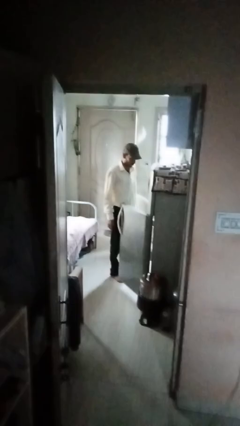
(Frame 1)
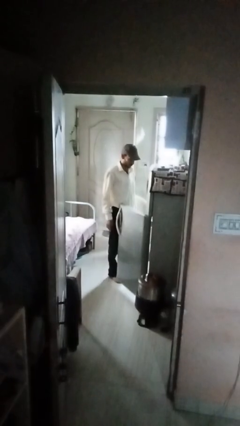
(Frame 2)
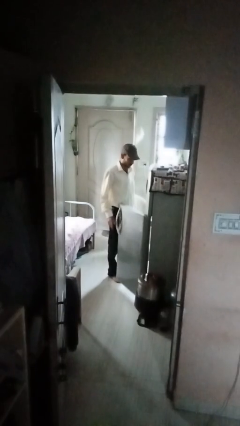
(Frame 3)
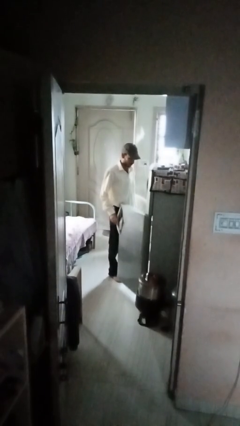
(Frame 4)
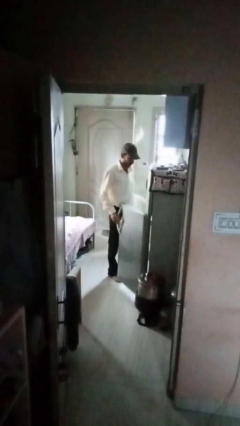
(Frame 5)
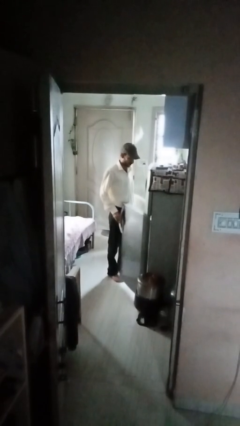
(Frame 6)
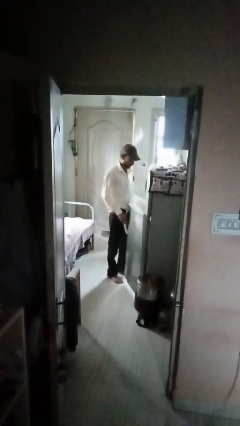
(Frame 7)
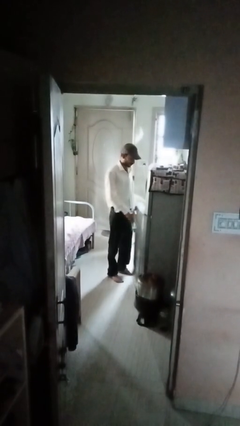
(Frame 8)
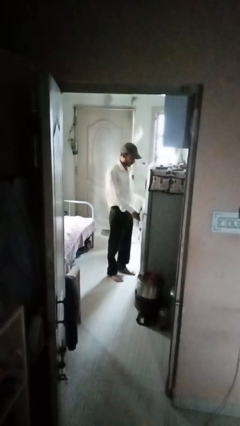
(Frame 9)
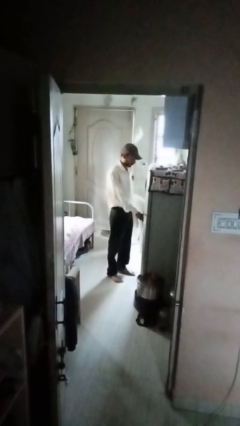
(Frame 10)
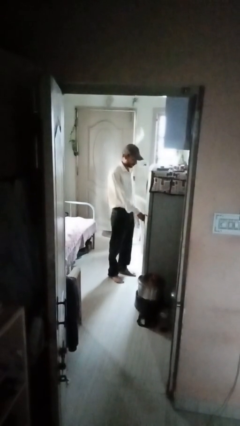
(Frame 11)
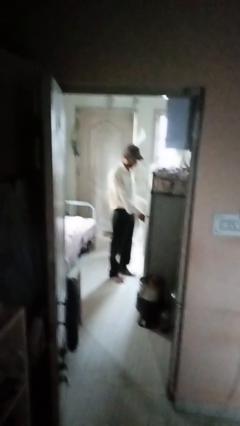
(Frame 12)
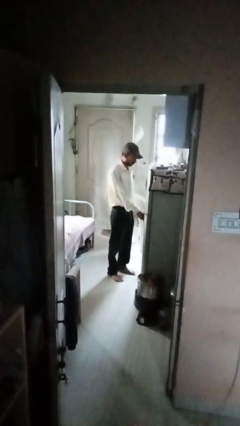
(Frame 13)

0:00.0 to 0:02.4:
person closes refrigerator

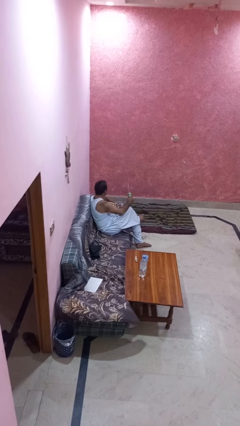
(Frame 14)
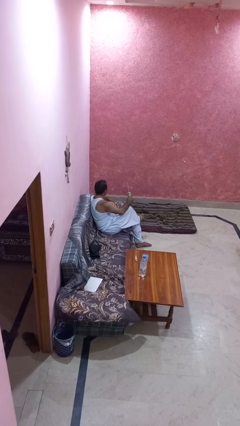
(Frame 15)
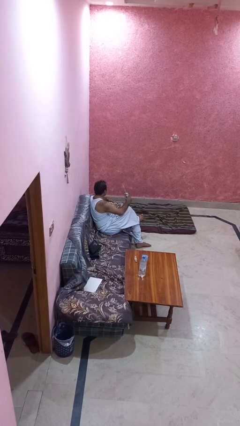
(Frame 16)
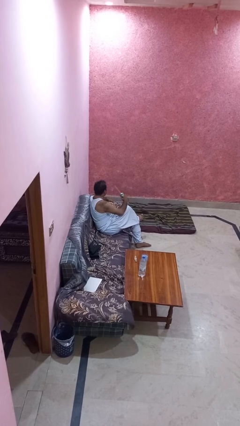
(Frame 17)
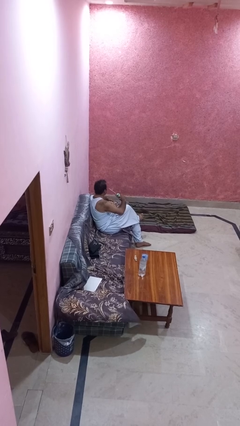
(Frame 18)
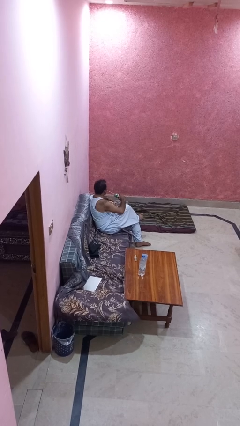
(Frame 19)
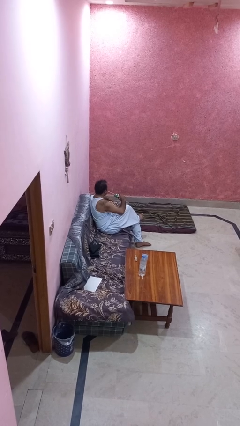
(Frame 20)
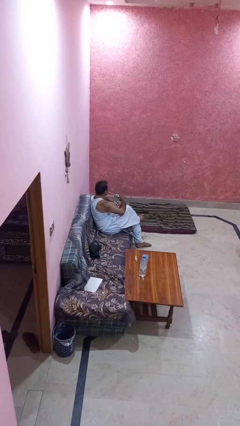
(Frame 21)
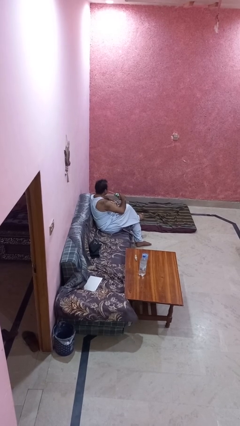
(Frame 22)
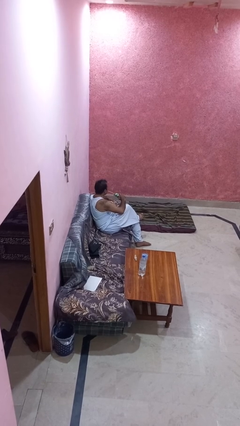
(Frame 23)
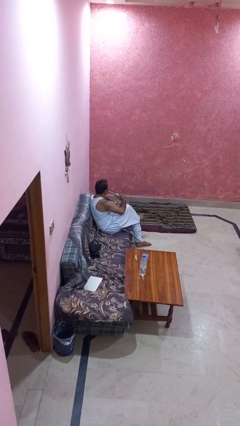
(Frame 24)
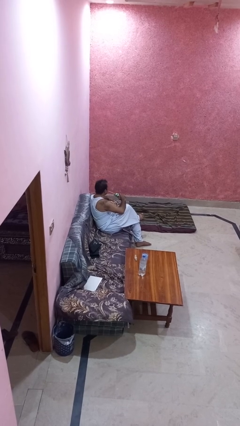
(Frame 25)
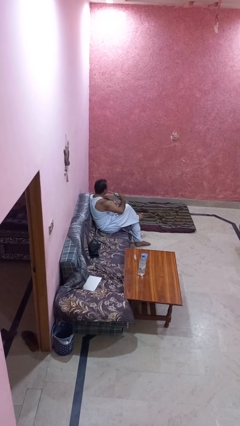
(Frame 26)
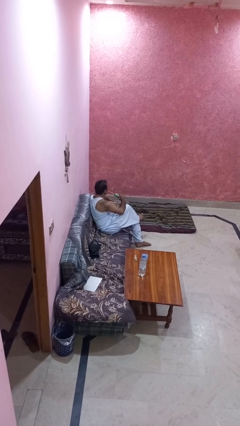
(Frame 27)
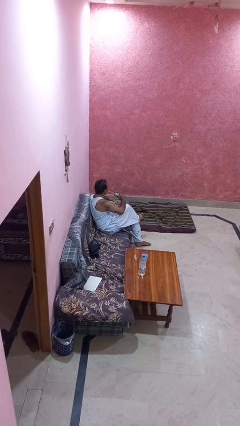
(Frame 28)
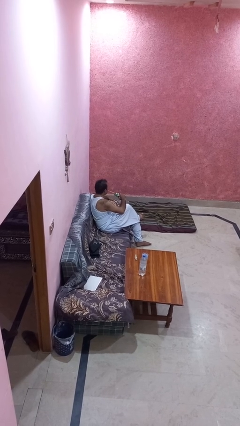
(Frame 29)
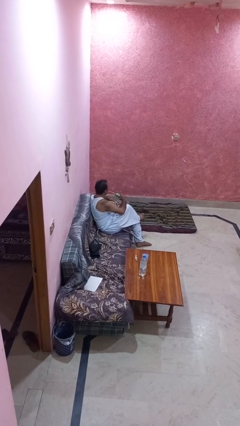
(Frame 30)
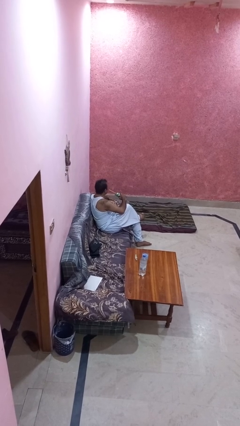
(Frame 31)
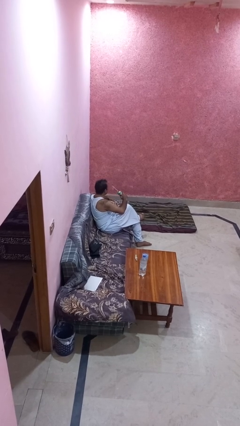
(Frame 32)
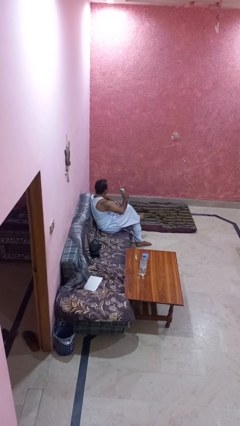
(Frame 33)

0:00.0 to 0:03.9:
person drinks from straw

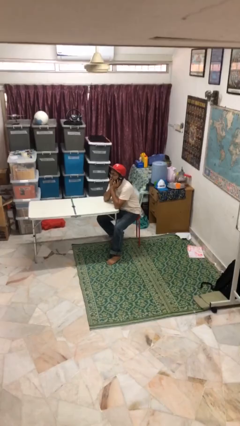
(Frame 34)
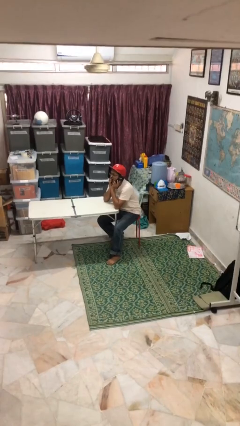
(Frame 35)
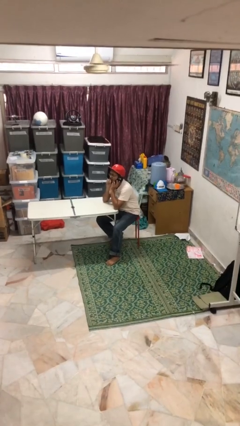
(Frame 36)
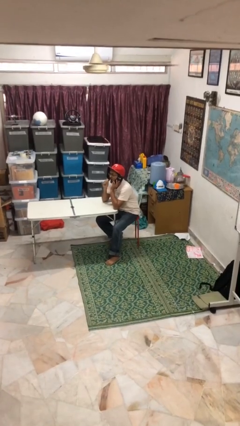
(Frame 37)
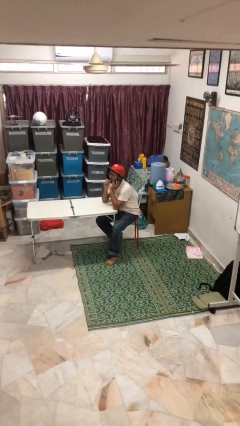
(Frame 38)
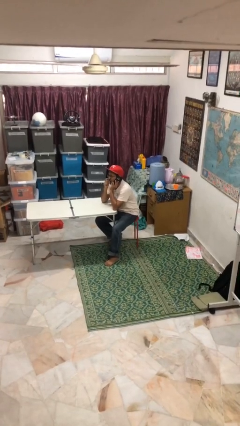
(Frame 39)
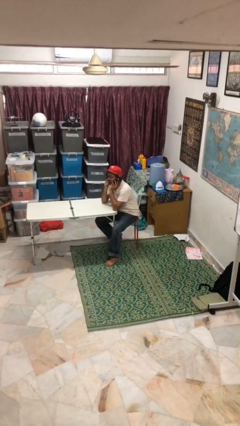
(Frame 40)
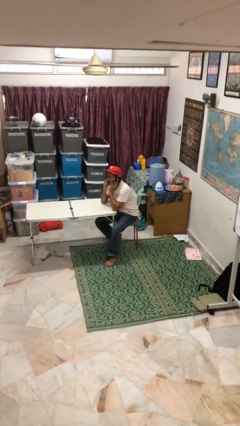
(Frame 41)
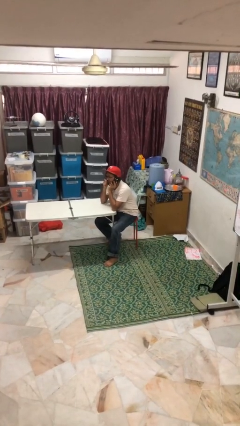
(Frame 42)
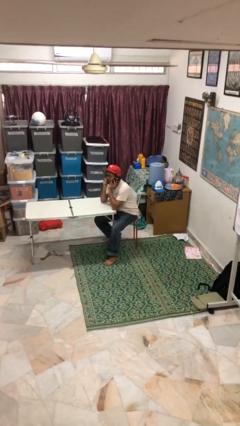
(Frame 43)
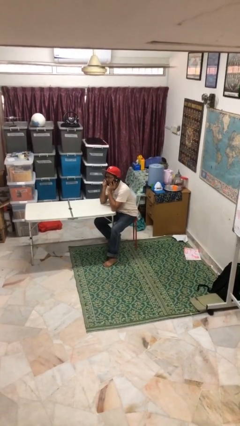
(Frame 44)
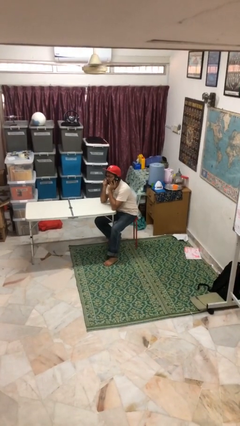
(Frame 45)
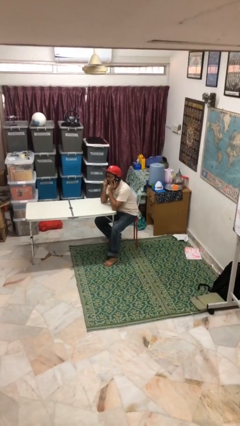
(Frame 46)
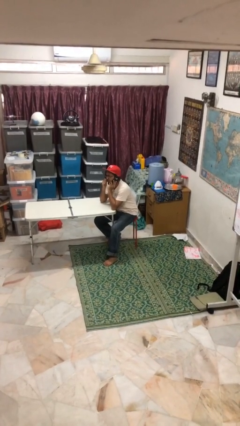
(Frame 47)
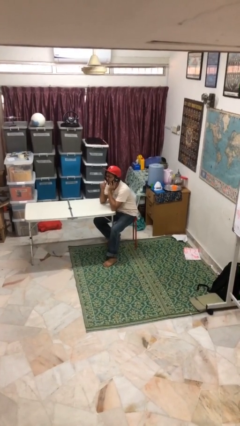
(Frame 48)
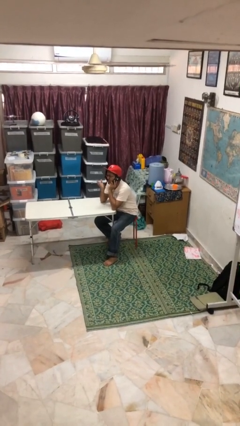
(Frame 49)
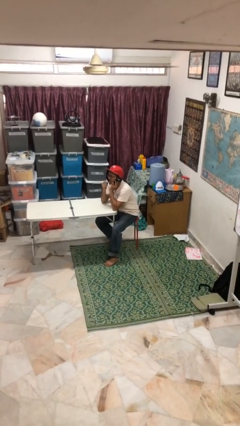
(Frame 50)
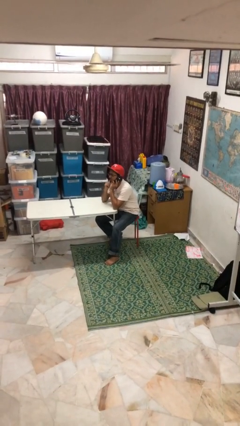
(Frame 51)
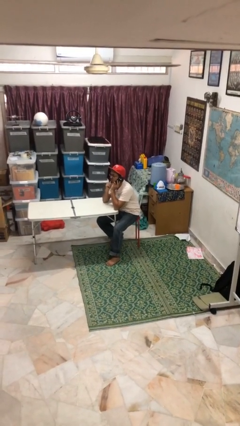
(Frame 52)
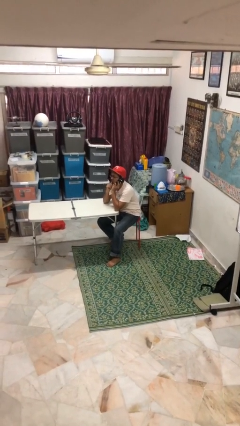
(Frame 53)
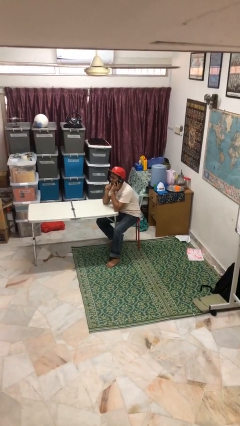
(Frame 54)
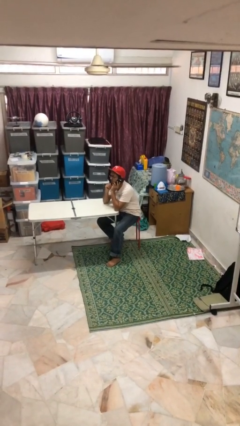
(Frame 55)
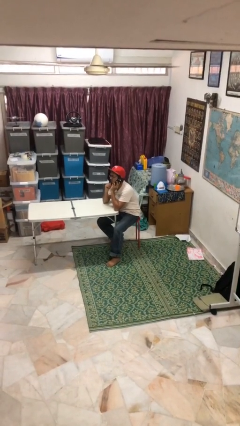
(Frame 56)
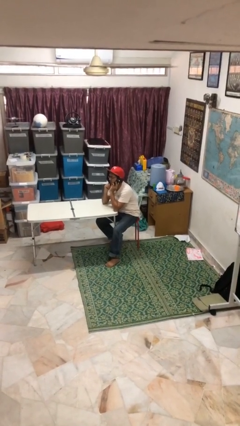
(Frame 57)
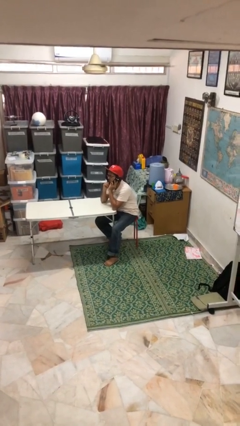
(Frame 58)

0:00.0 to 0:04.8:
person talks on phone

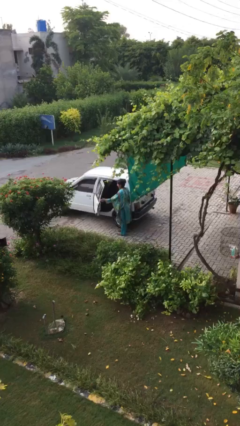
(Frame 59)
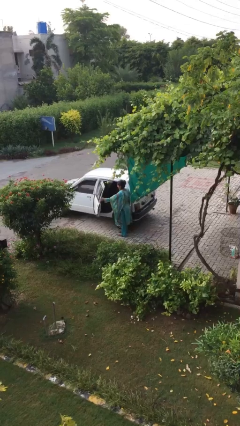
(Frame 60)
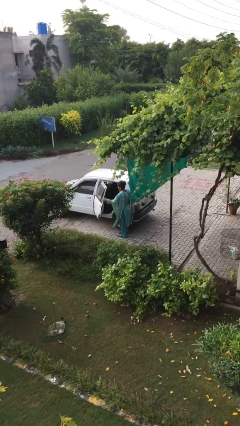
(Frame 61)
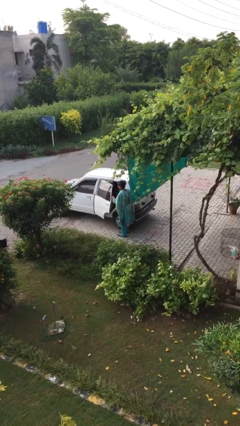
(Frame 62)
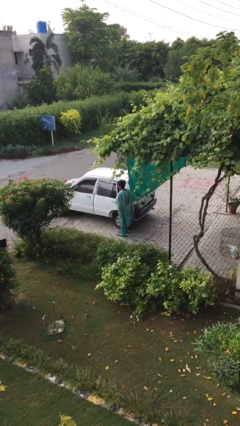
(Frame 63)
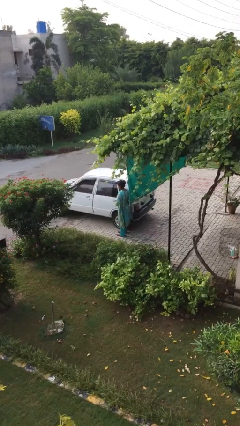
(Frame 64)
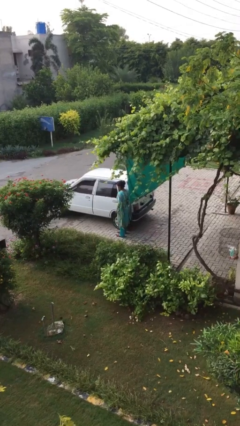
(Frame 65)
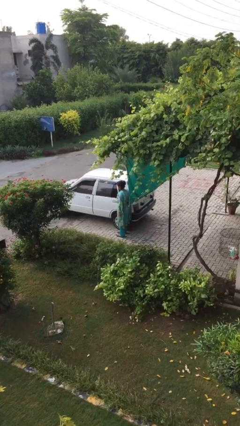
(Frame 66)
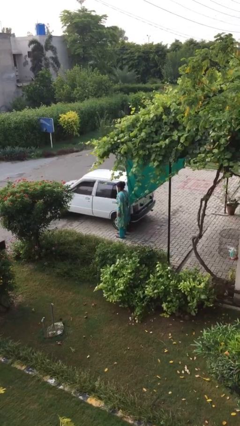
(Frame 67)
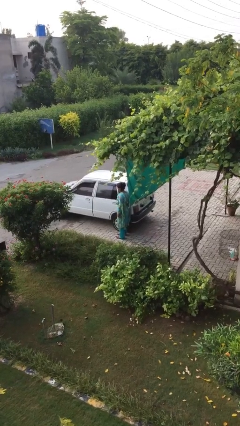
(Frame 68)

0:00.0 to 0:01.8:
person closes car door

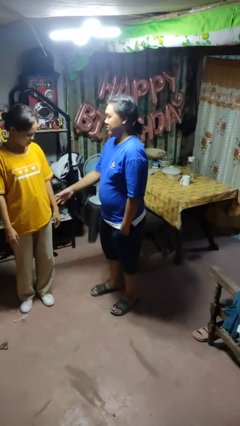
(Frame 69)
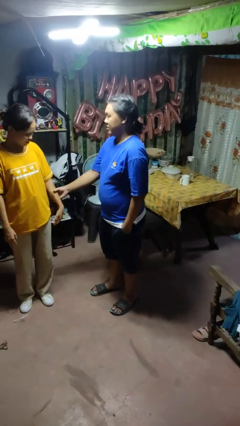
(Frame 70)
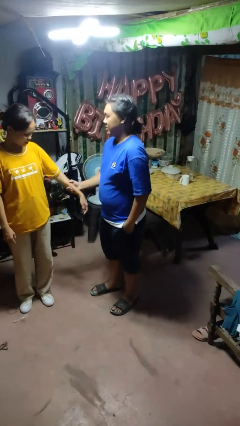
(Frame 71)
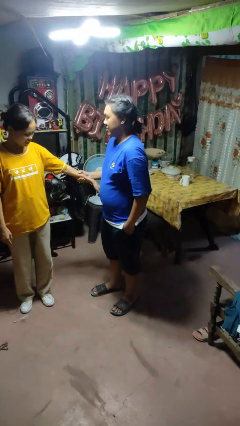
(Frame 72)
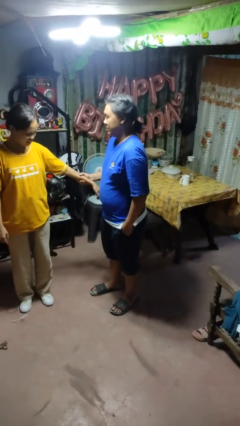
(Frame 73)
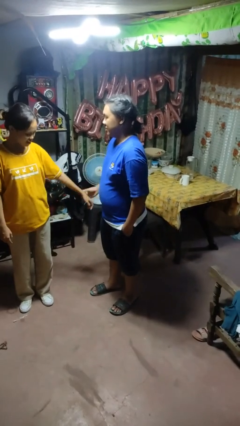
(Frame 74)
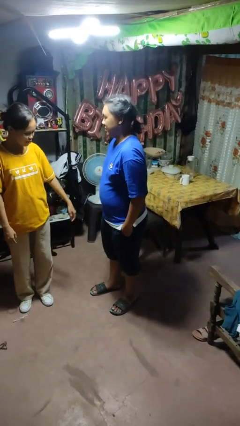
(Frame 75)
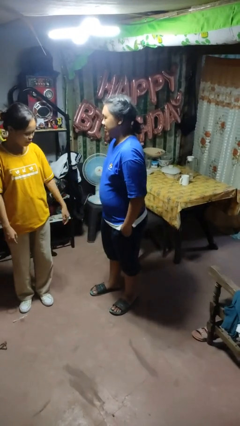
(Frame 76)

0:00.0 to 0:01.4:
person grabs person by forearm

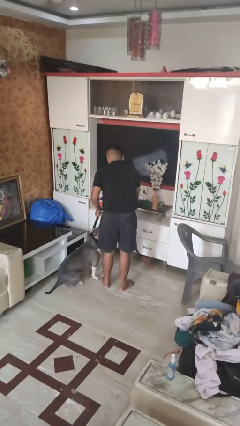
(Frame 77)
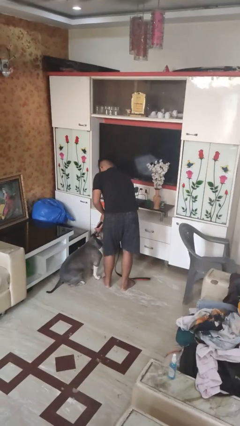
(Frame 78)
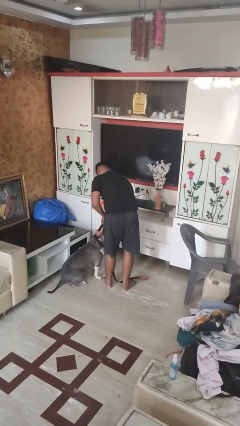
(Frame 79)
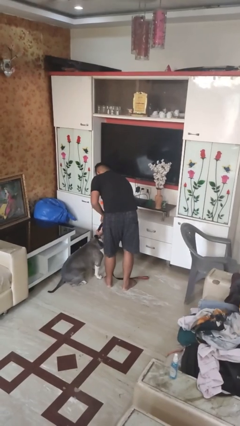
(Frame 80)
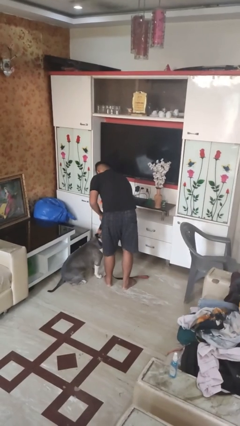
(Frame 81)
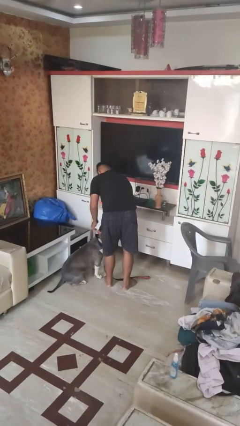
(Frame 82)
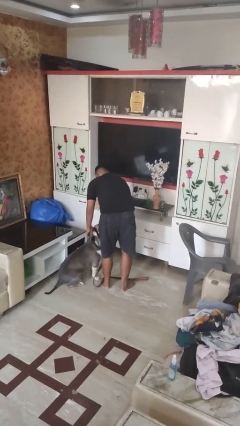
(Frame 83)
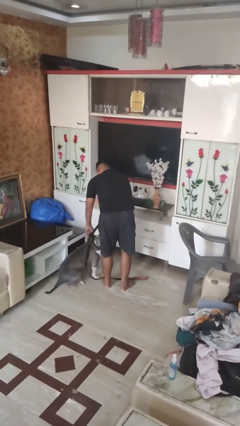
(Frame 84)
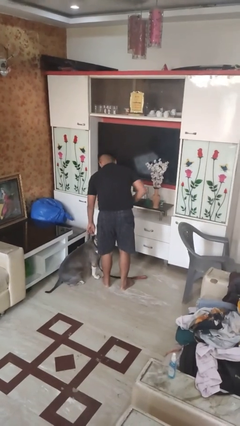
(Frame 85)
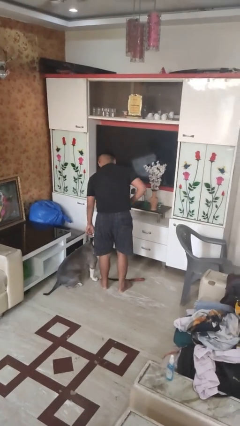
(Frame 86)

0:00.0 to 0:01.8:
person unattaches leash from dog

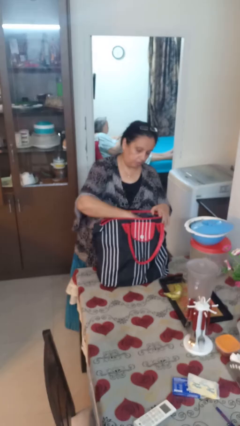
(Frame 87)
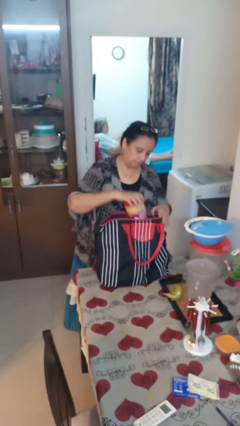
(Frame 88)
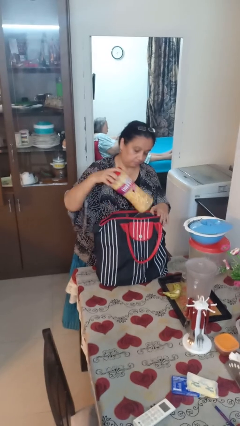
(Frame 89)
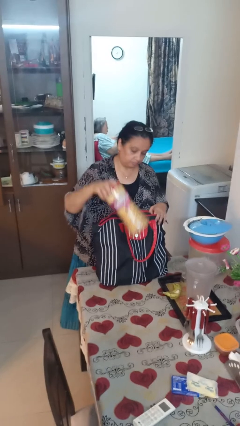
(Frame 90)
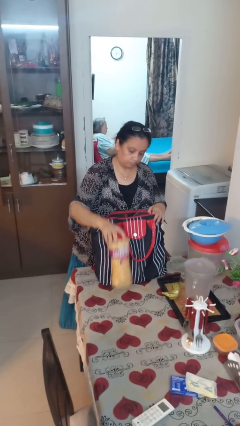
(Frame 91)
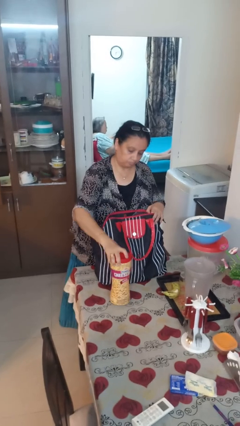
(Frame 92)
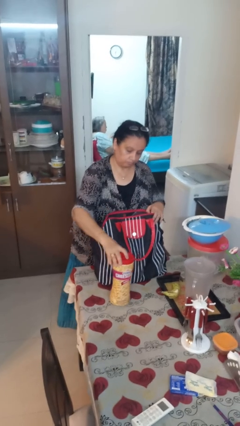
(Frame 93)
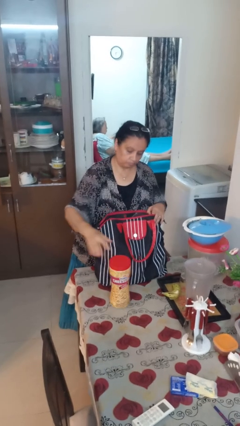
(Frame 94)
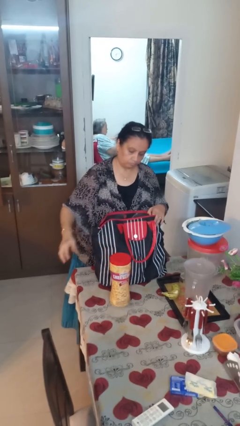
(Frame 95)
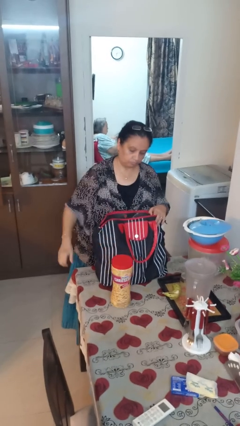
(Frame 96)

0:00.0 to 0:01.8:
person takes object from bag
